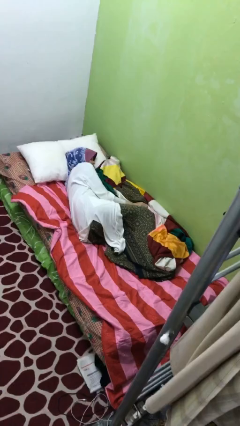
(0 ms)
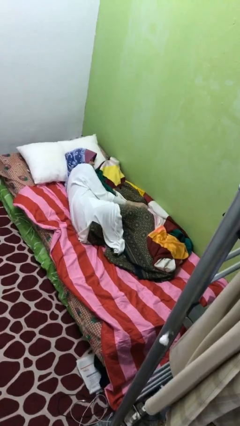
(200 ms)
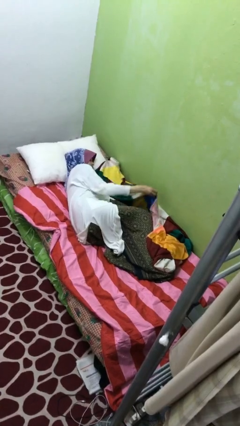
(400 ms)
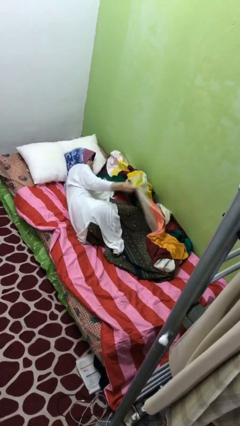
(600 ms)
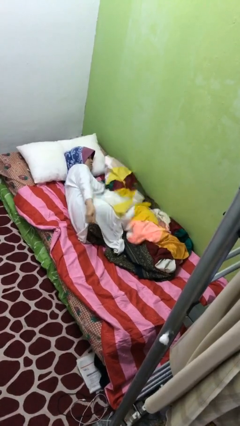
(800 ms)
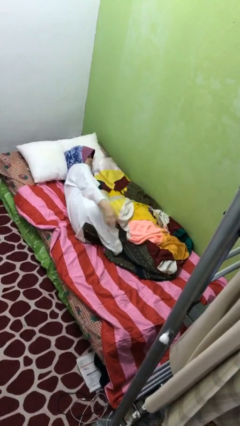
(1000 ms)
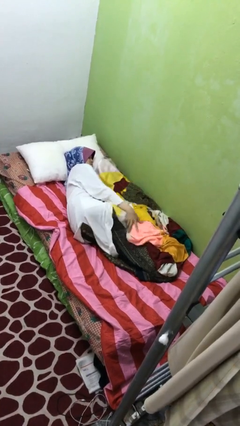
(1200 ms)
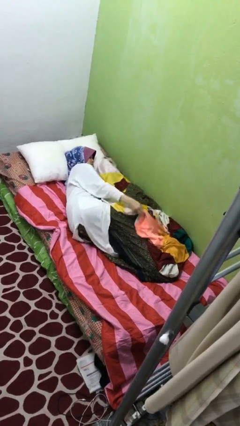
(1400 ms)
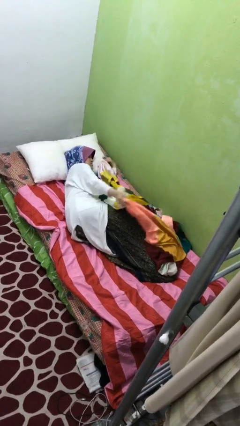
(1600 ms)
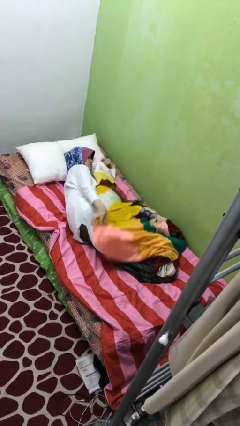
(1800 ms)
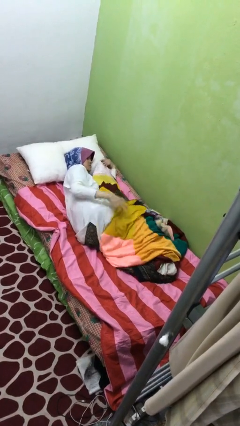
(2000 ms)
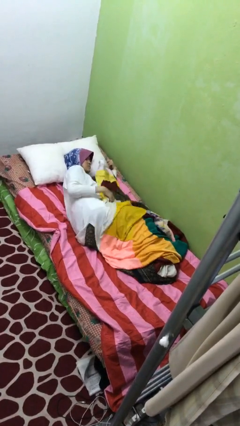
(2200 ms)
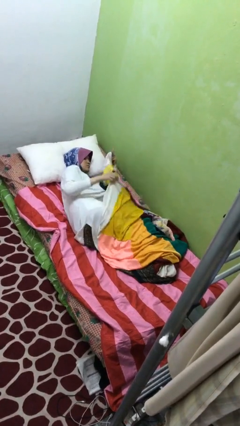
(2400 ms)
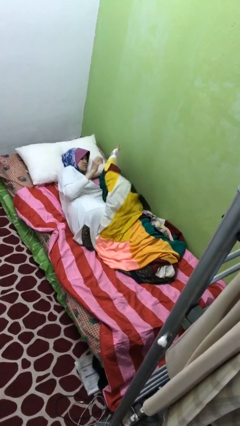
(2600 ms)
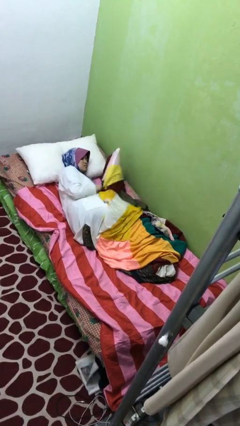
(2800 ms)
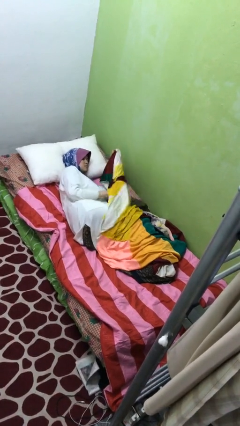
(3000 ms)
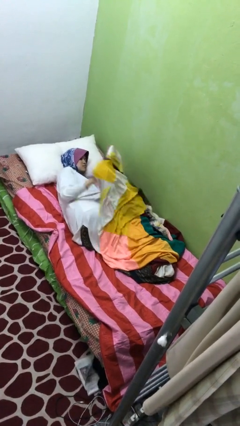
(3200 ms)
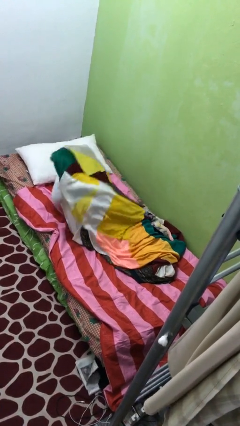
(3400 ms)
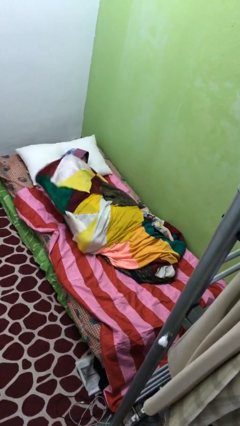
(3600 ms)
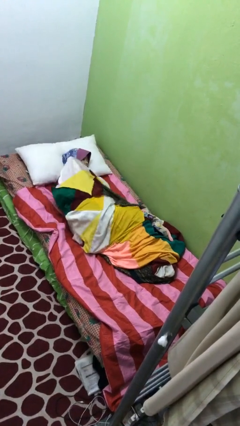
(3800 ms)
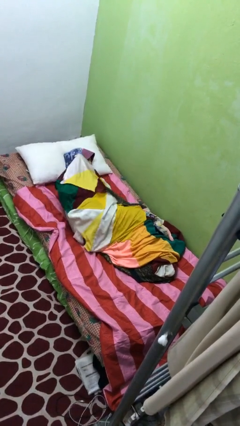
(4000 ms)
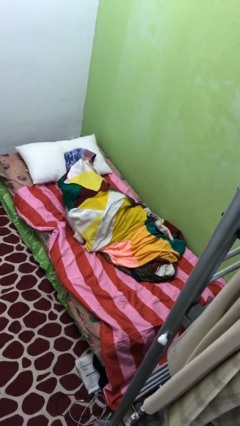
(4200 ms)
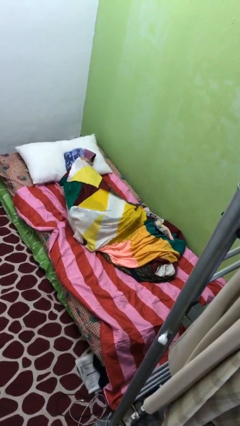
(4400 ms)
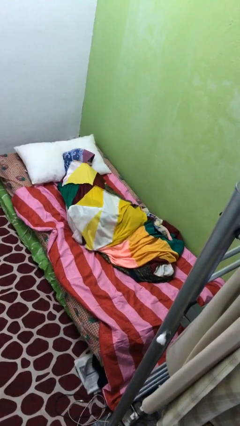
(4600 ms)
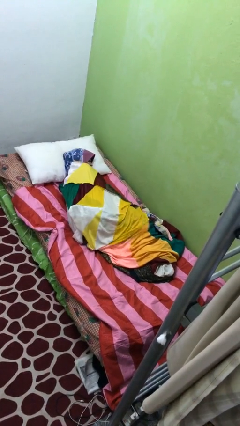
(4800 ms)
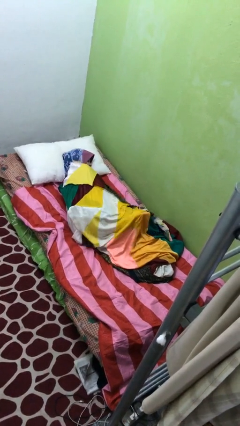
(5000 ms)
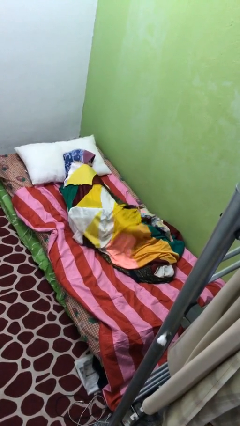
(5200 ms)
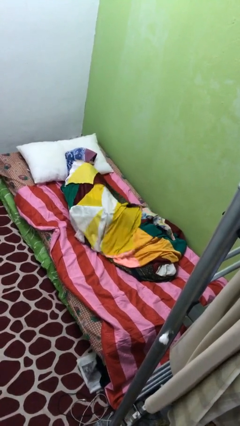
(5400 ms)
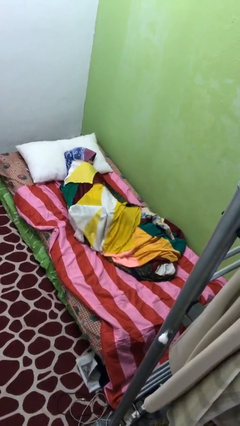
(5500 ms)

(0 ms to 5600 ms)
person covers with blanket

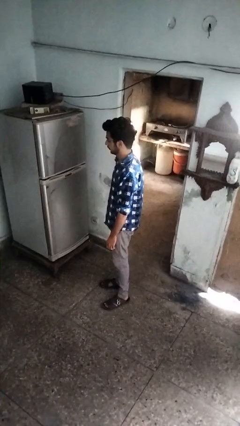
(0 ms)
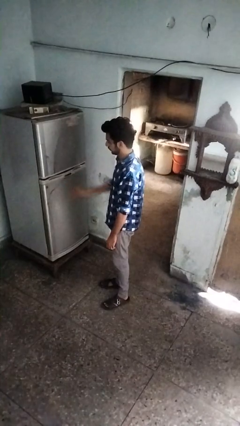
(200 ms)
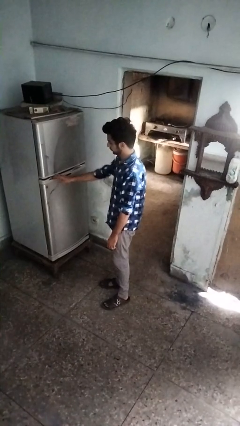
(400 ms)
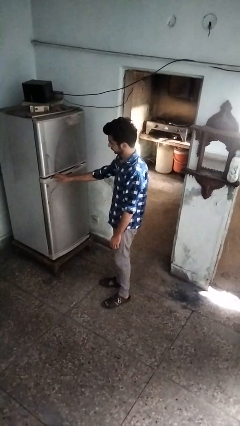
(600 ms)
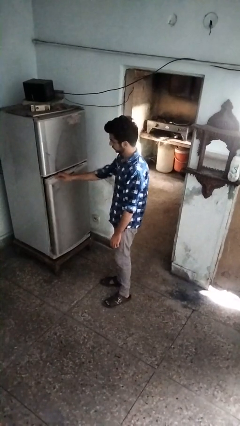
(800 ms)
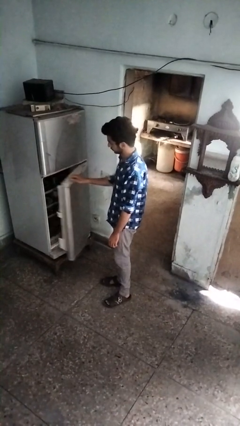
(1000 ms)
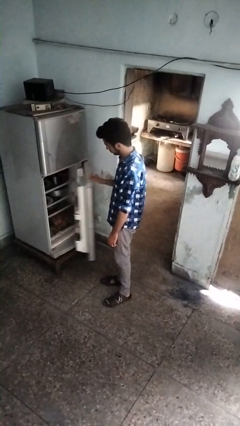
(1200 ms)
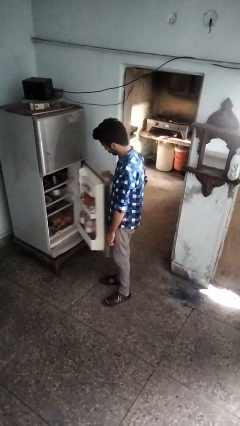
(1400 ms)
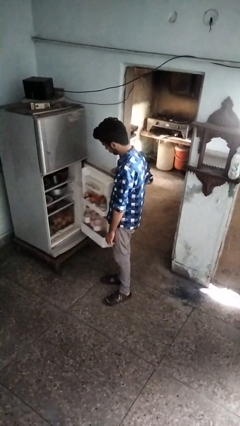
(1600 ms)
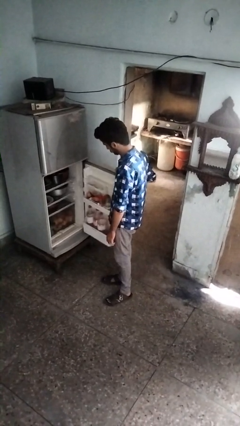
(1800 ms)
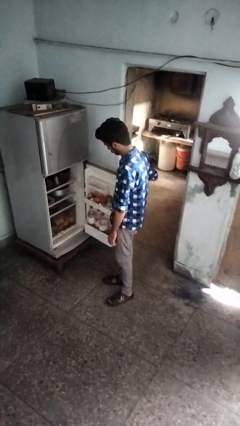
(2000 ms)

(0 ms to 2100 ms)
person opens refrigerator

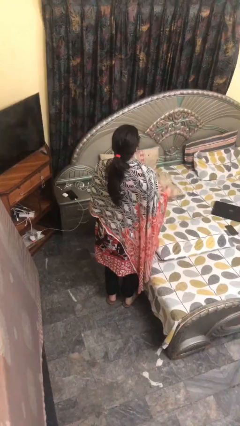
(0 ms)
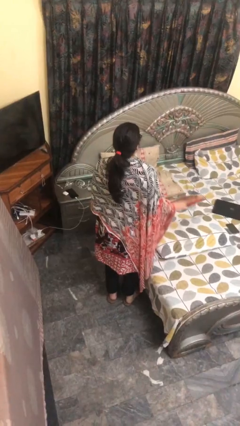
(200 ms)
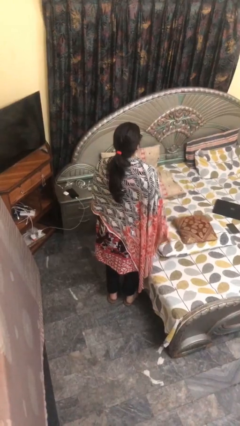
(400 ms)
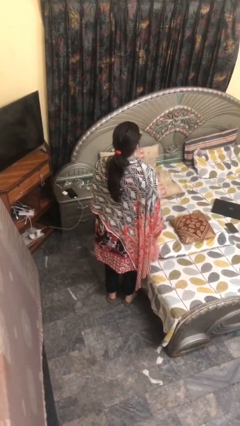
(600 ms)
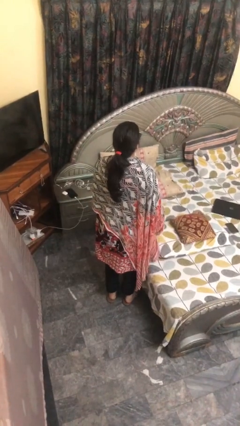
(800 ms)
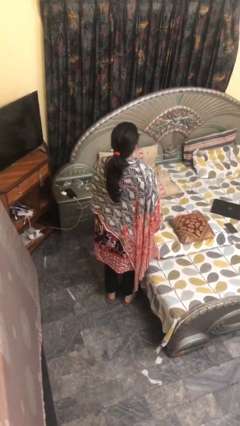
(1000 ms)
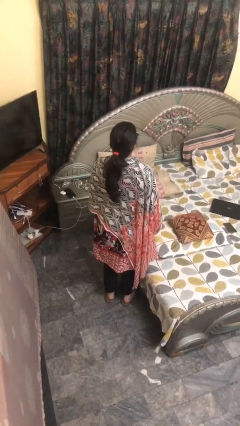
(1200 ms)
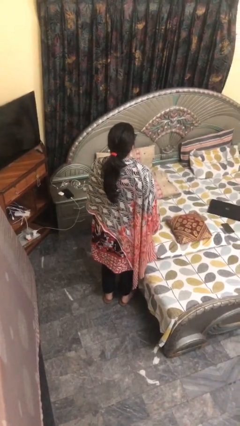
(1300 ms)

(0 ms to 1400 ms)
person throws object on bed

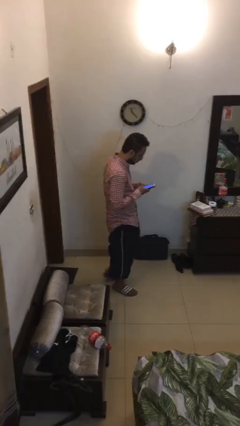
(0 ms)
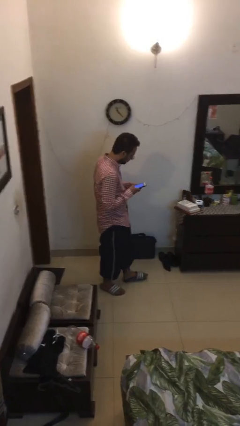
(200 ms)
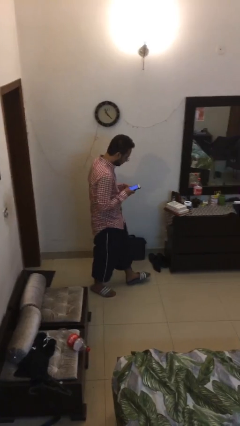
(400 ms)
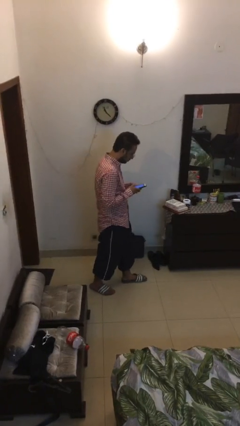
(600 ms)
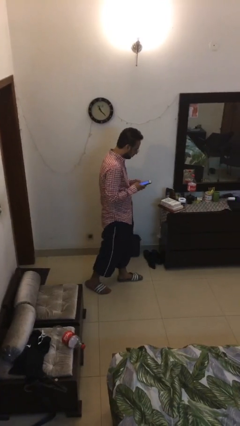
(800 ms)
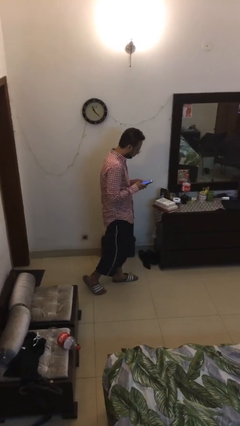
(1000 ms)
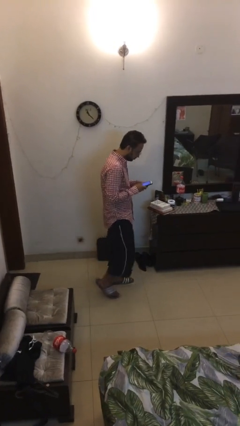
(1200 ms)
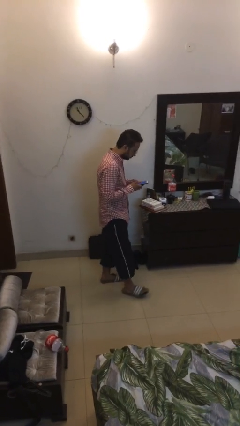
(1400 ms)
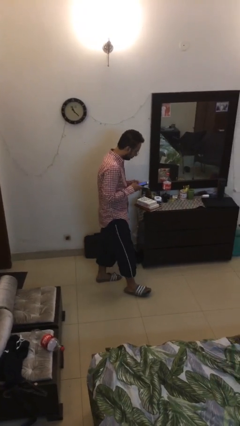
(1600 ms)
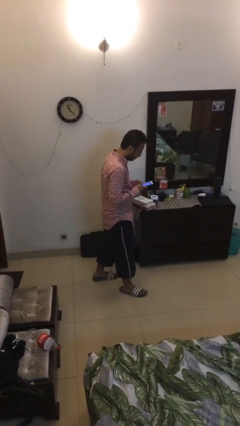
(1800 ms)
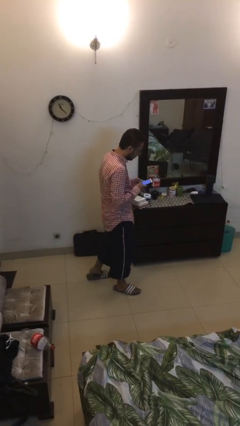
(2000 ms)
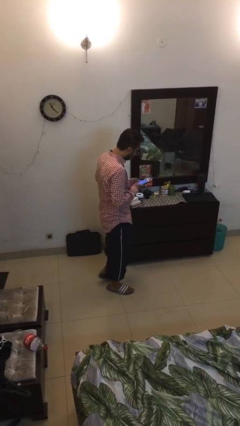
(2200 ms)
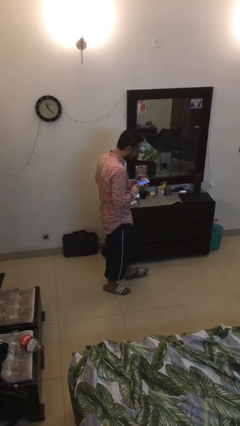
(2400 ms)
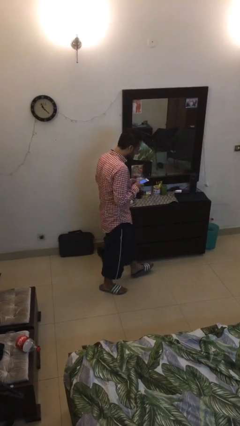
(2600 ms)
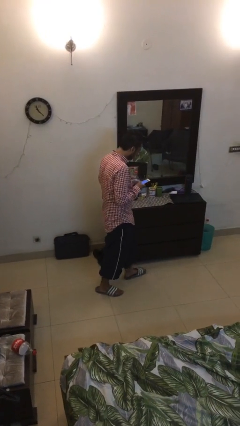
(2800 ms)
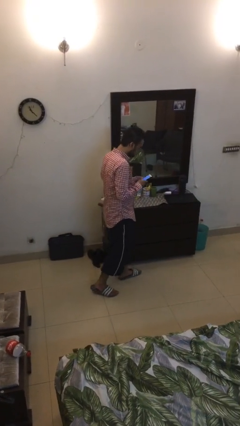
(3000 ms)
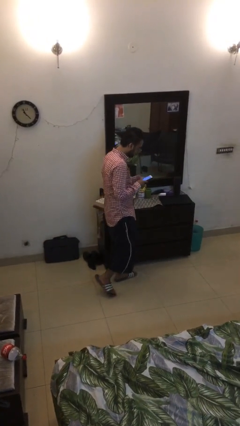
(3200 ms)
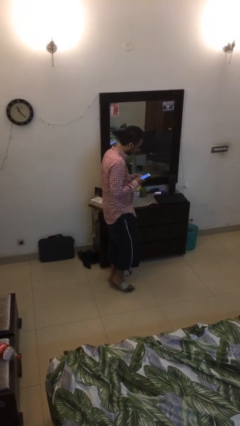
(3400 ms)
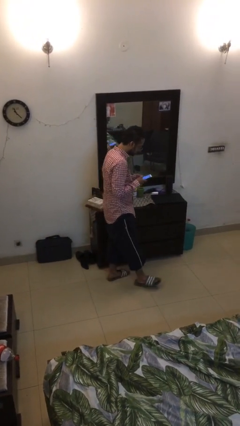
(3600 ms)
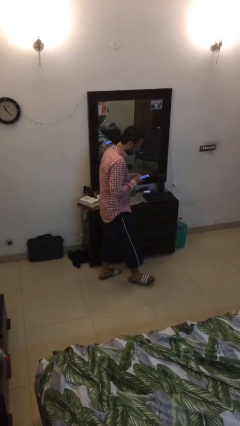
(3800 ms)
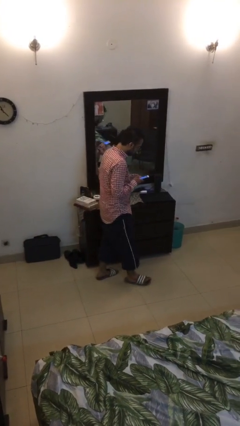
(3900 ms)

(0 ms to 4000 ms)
person texts on phone

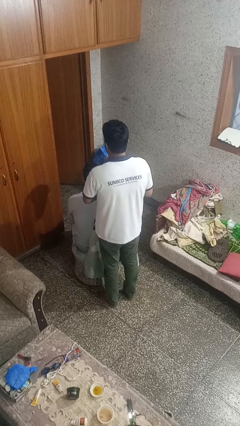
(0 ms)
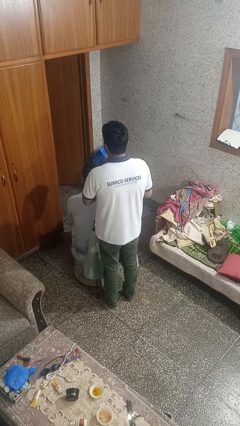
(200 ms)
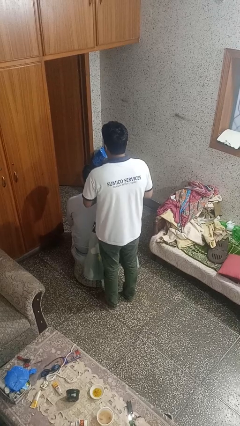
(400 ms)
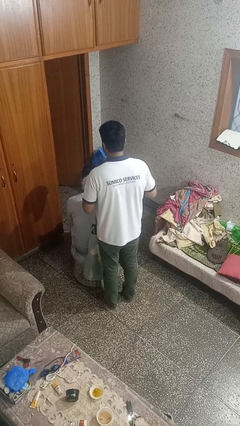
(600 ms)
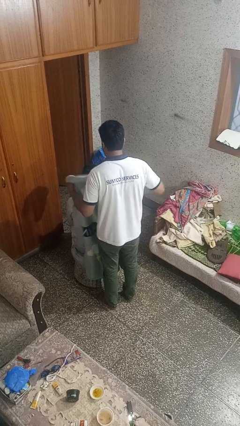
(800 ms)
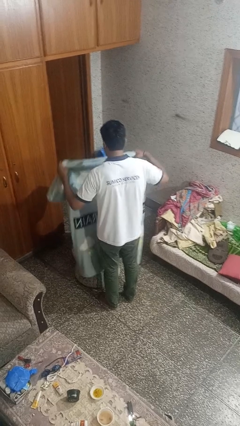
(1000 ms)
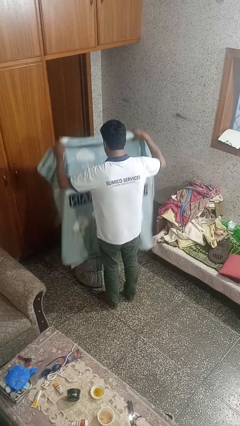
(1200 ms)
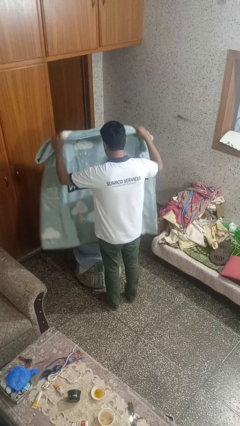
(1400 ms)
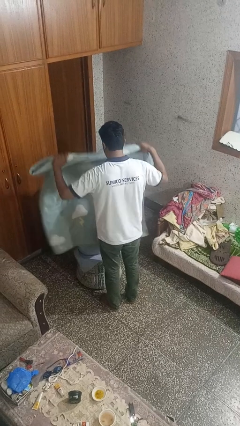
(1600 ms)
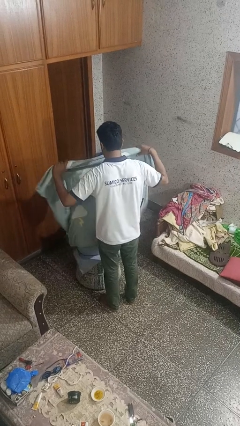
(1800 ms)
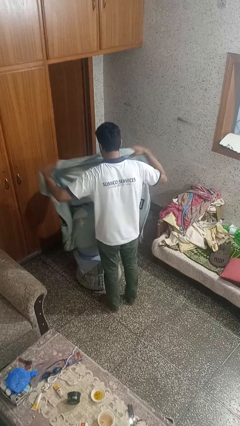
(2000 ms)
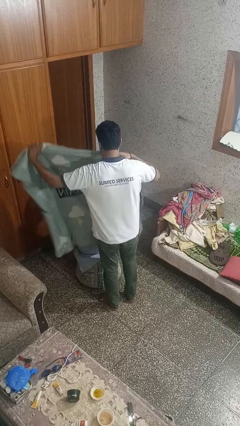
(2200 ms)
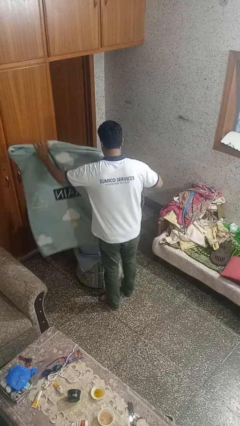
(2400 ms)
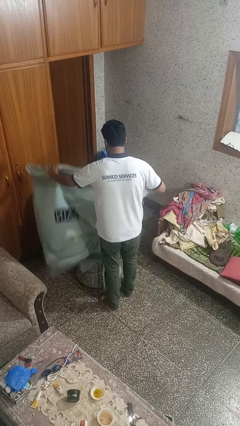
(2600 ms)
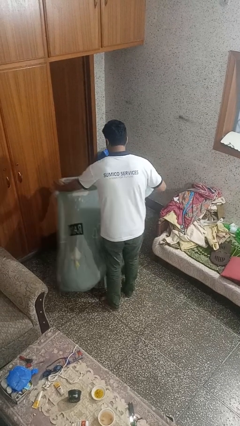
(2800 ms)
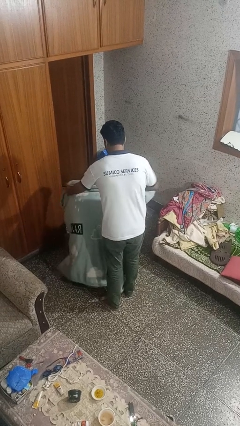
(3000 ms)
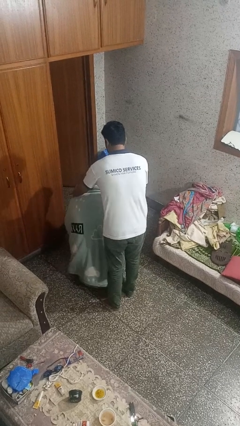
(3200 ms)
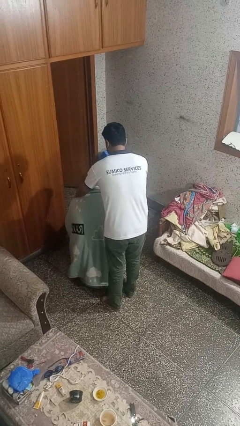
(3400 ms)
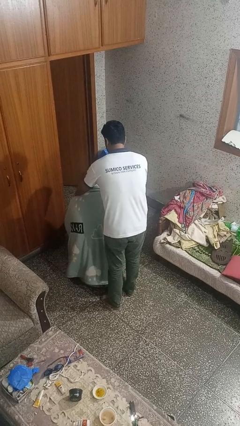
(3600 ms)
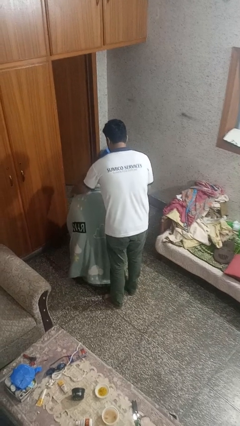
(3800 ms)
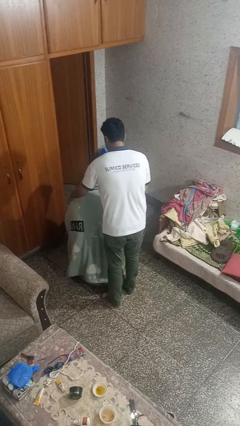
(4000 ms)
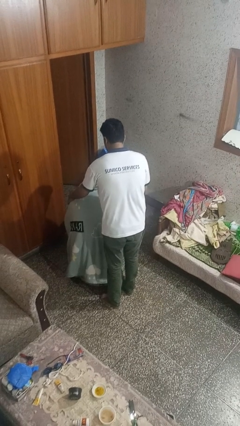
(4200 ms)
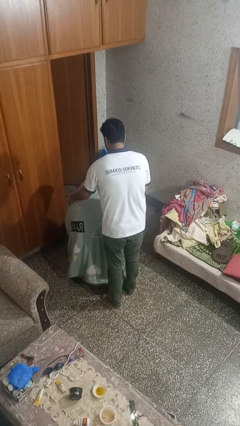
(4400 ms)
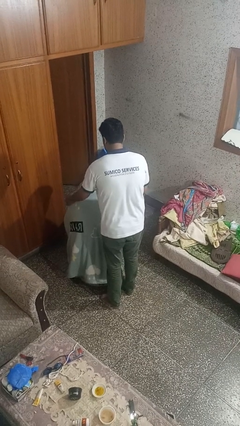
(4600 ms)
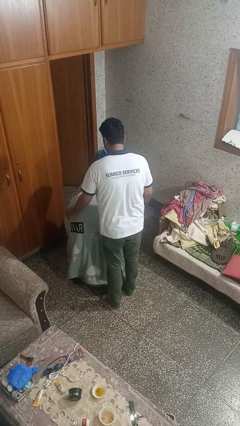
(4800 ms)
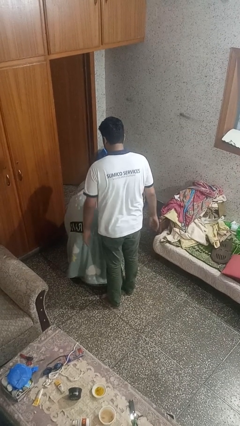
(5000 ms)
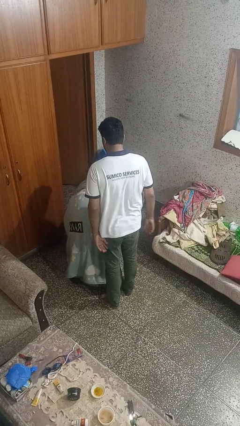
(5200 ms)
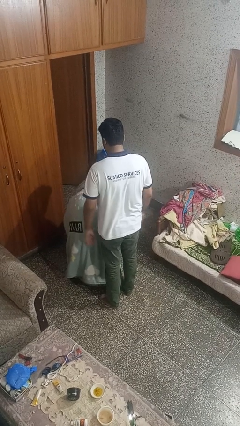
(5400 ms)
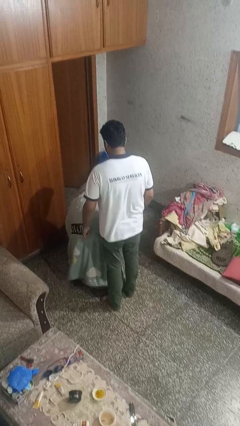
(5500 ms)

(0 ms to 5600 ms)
person covers friend with blanket
